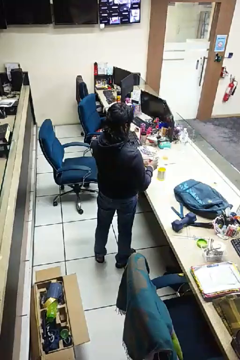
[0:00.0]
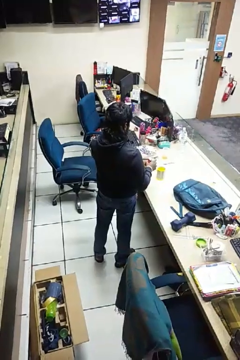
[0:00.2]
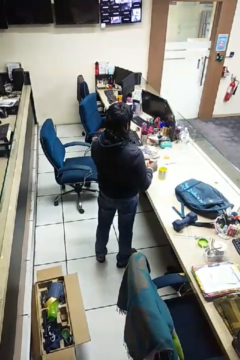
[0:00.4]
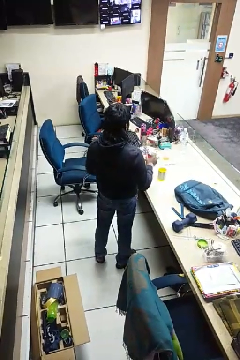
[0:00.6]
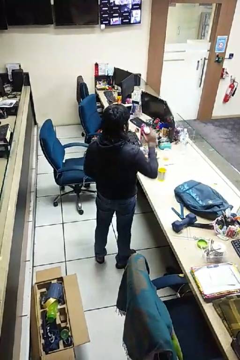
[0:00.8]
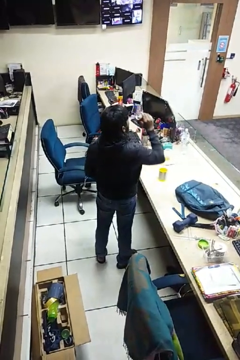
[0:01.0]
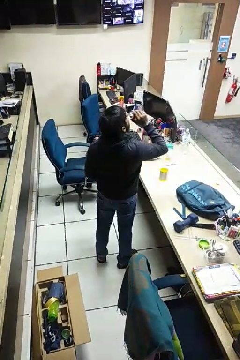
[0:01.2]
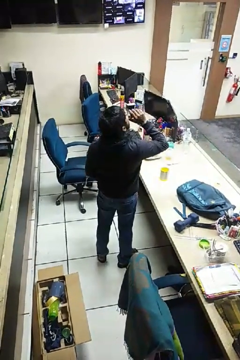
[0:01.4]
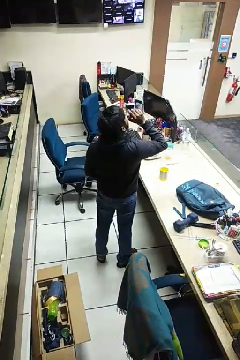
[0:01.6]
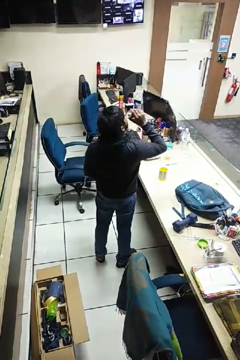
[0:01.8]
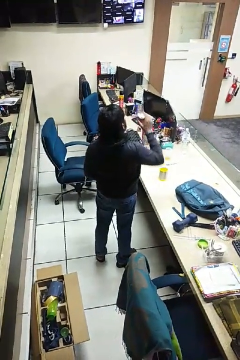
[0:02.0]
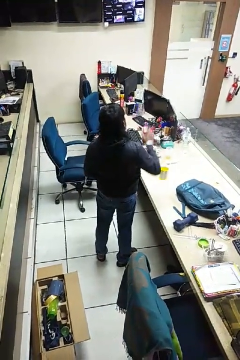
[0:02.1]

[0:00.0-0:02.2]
person drinks from beverage can

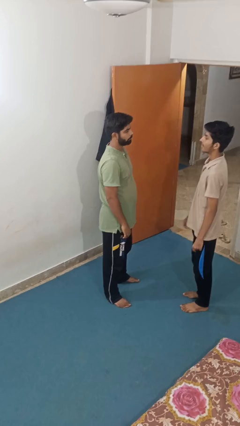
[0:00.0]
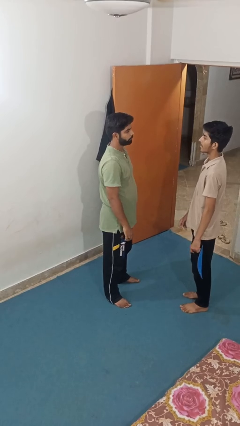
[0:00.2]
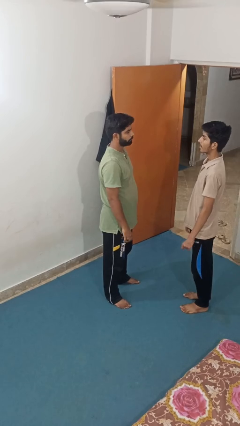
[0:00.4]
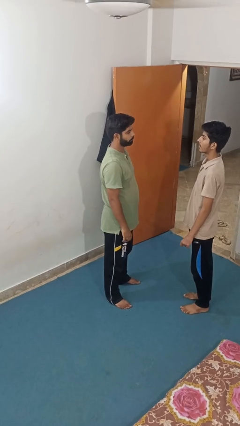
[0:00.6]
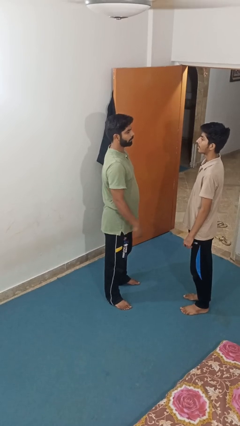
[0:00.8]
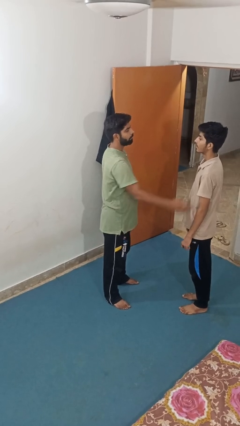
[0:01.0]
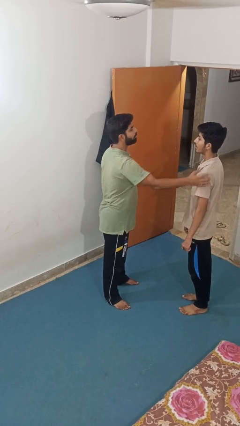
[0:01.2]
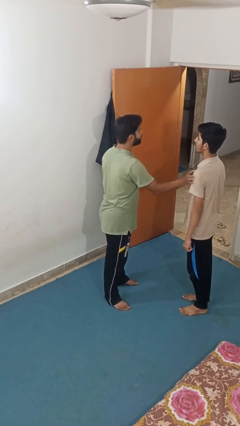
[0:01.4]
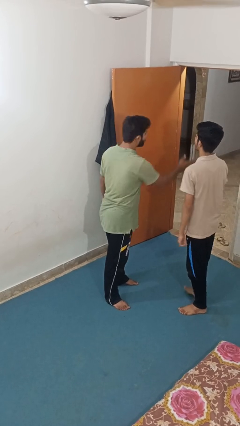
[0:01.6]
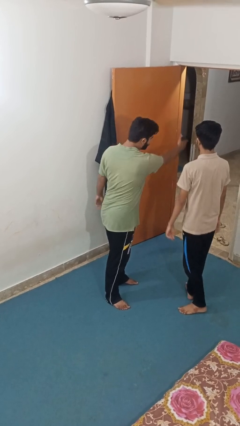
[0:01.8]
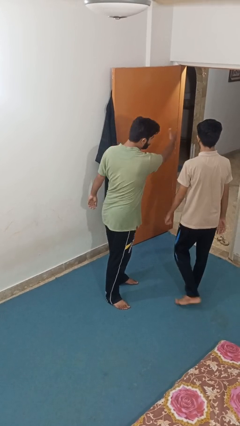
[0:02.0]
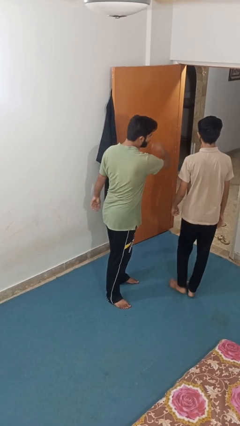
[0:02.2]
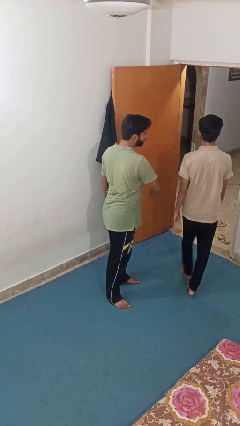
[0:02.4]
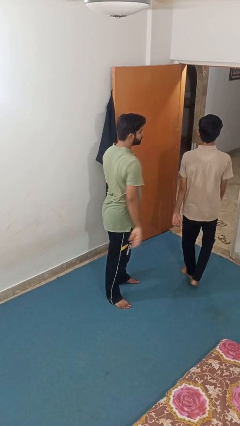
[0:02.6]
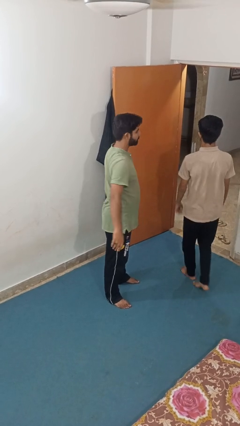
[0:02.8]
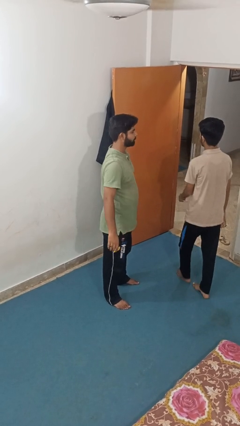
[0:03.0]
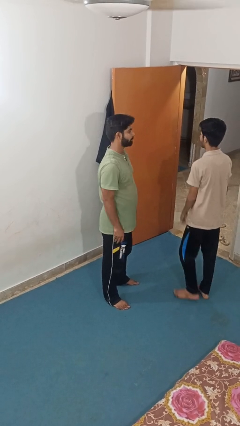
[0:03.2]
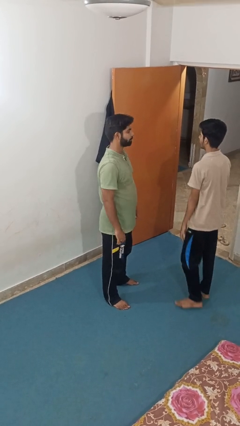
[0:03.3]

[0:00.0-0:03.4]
person shoves person

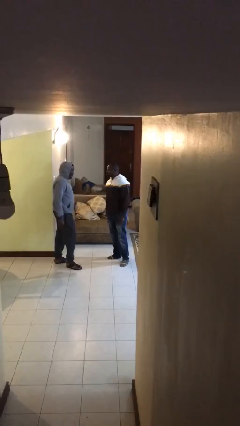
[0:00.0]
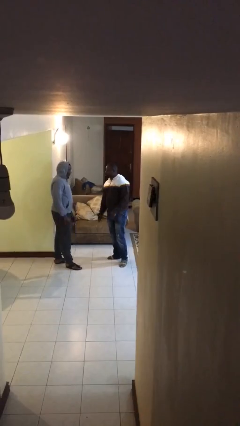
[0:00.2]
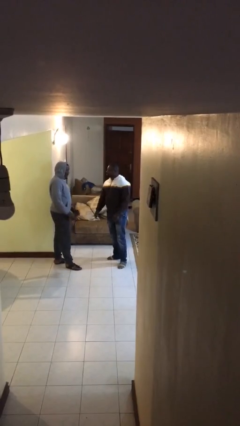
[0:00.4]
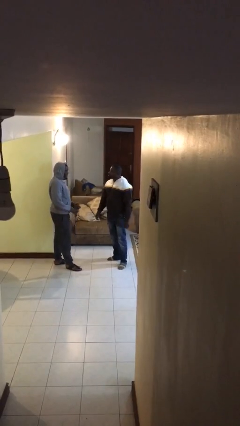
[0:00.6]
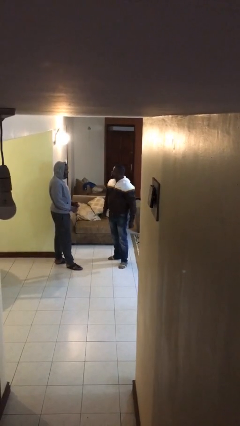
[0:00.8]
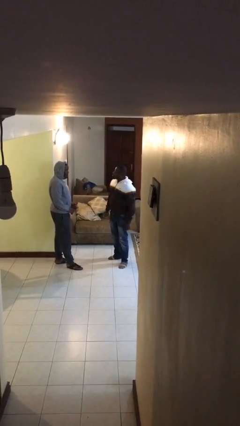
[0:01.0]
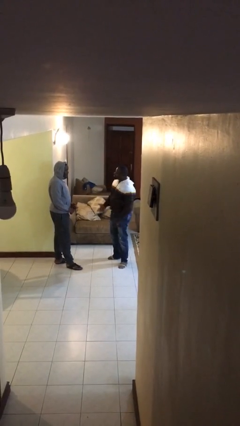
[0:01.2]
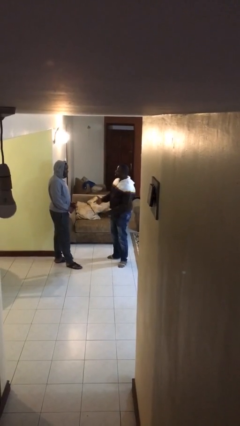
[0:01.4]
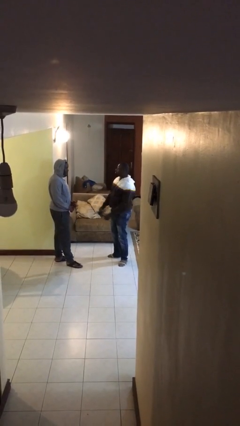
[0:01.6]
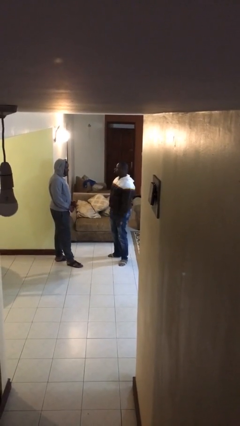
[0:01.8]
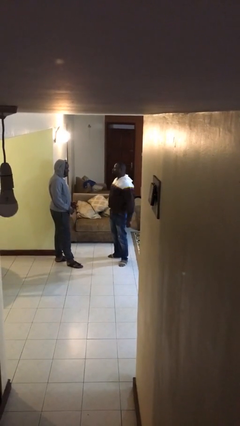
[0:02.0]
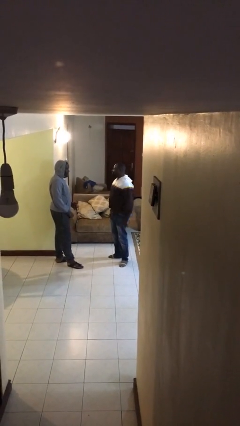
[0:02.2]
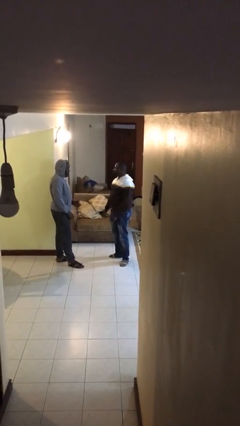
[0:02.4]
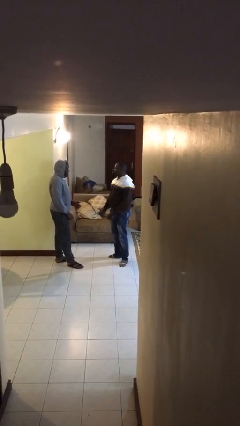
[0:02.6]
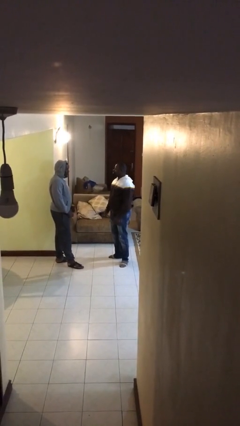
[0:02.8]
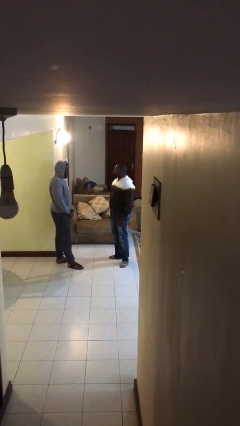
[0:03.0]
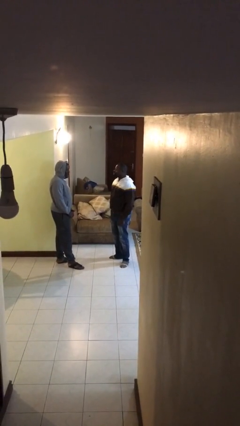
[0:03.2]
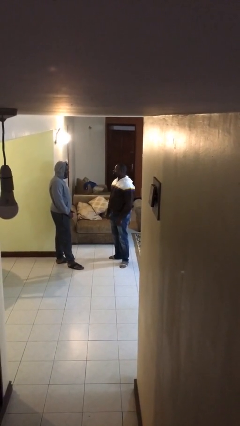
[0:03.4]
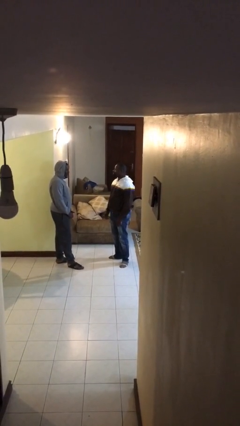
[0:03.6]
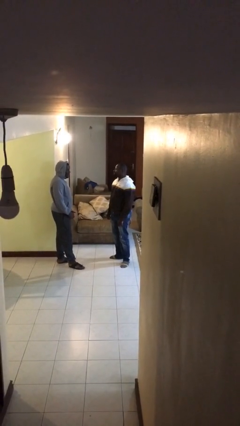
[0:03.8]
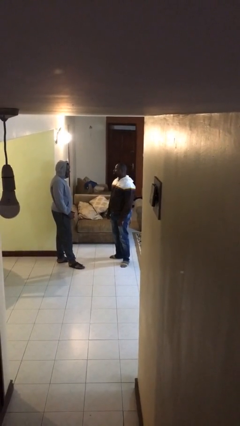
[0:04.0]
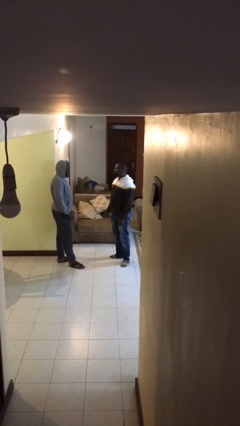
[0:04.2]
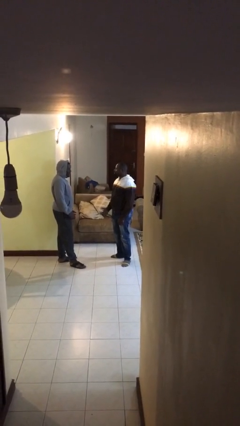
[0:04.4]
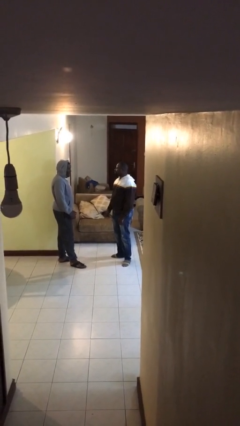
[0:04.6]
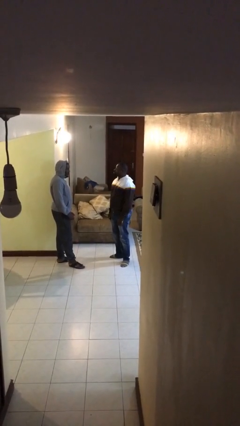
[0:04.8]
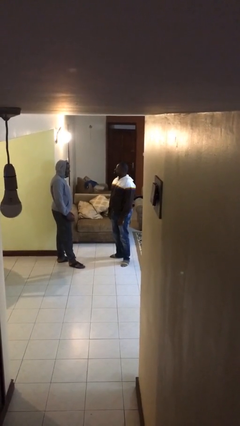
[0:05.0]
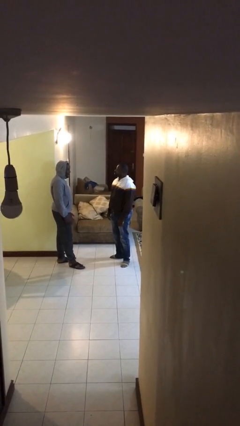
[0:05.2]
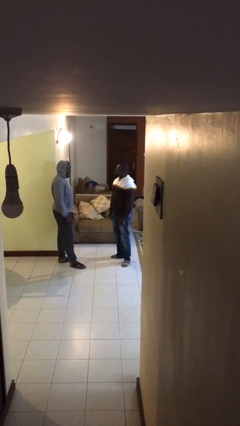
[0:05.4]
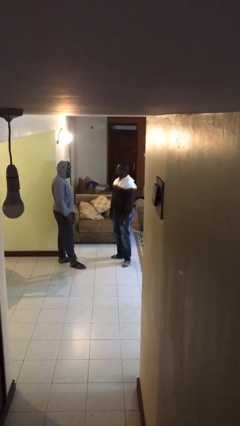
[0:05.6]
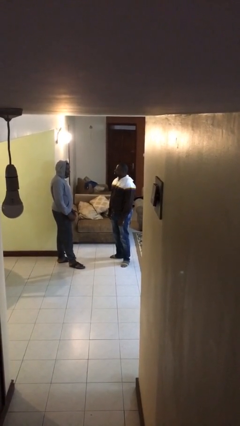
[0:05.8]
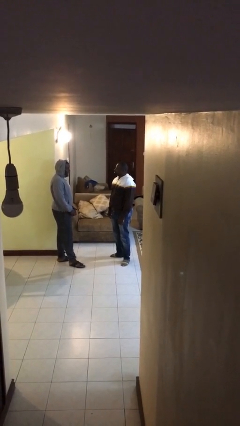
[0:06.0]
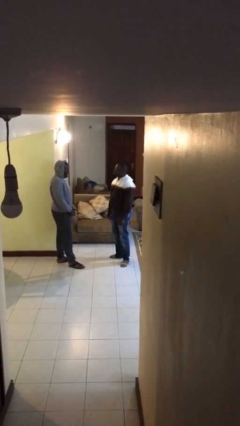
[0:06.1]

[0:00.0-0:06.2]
person talks to person

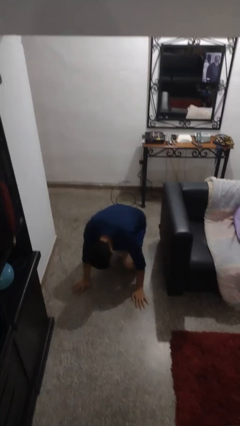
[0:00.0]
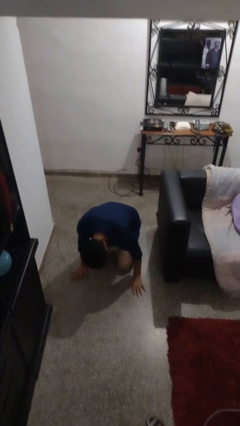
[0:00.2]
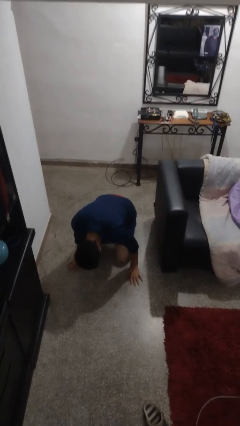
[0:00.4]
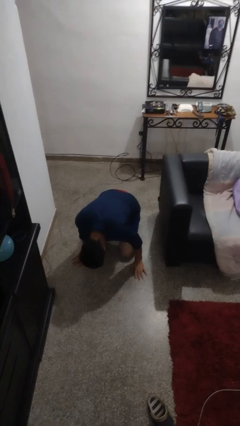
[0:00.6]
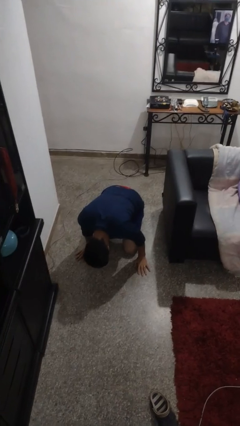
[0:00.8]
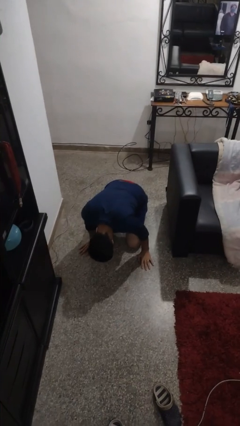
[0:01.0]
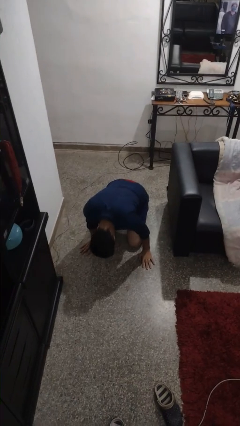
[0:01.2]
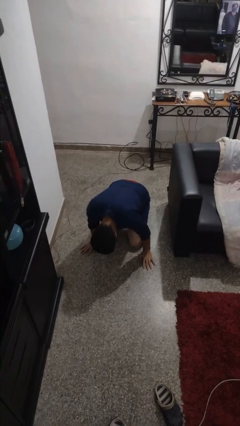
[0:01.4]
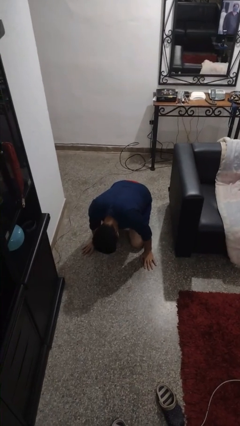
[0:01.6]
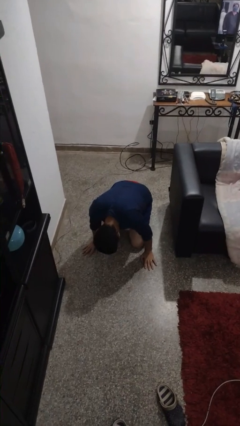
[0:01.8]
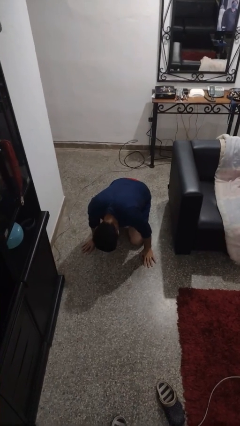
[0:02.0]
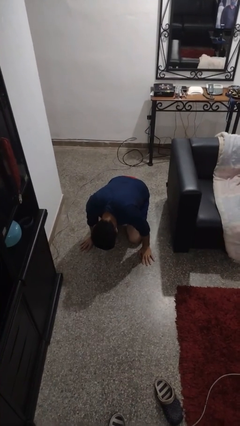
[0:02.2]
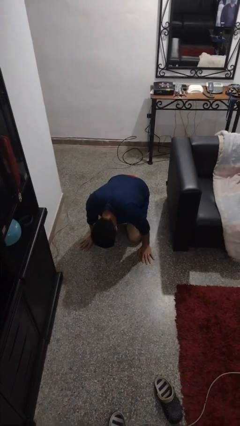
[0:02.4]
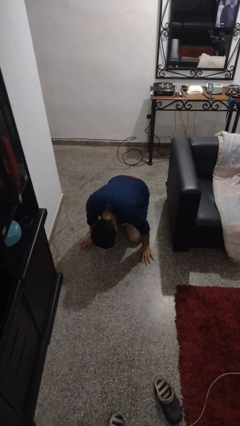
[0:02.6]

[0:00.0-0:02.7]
person lies down on floor

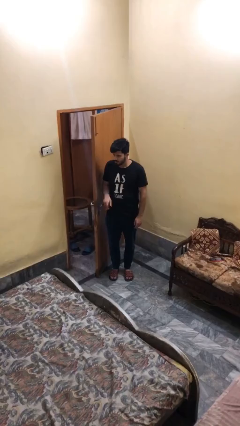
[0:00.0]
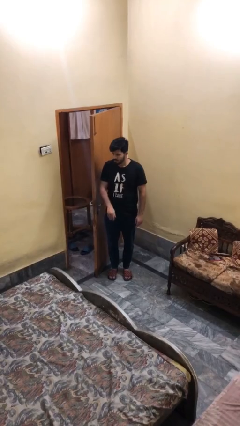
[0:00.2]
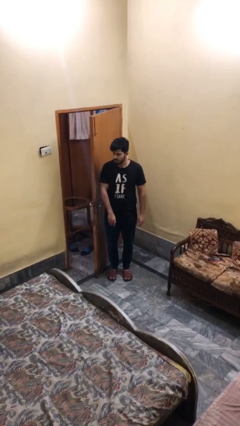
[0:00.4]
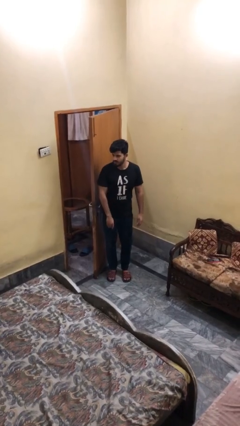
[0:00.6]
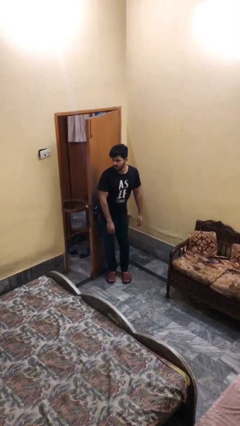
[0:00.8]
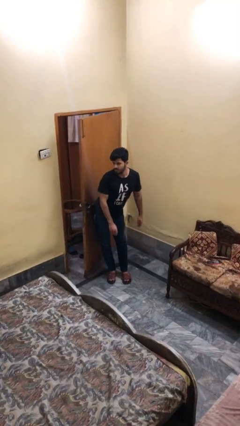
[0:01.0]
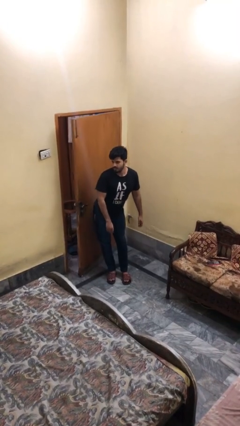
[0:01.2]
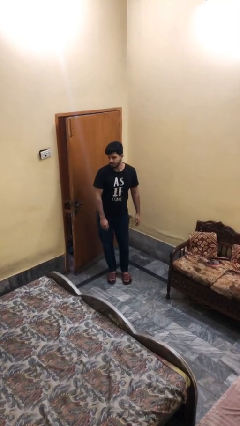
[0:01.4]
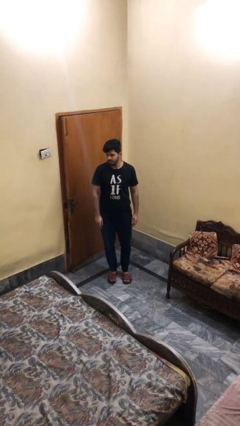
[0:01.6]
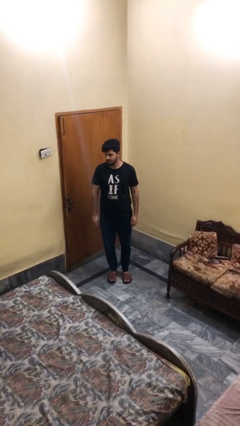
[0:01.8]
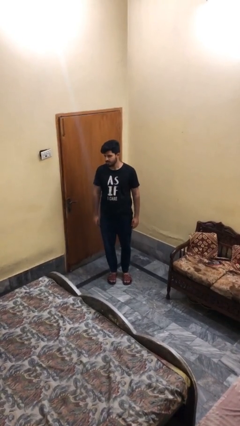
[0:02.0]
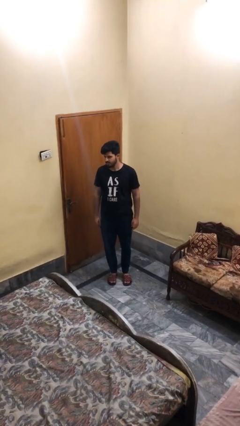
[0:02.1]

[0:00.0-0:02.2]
person closes door with hip

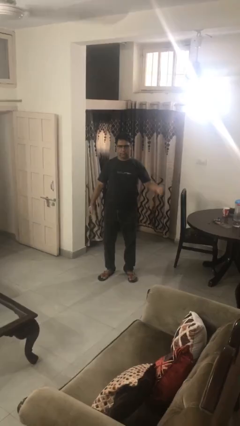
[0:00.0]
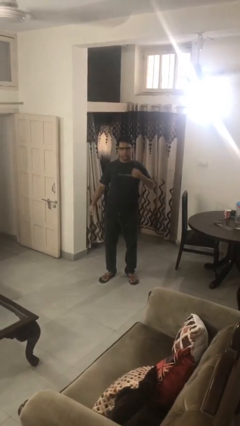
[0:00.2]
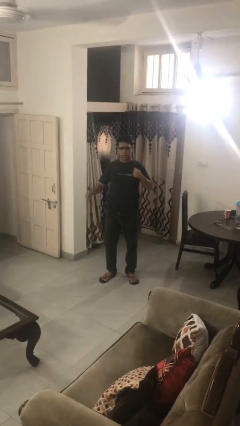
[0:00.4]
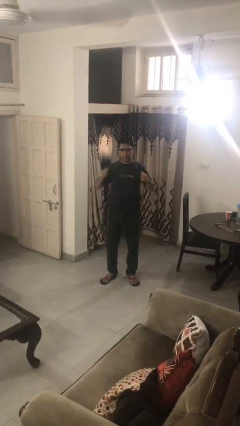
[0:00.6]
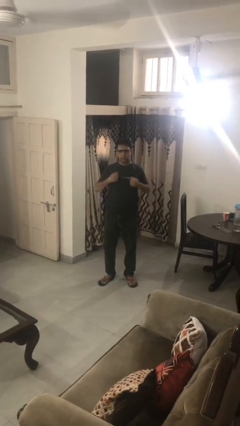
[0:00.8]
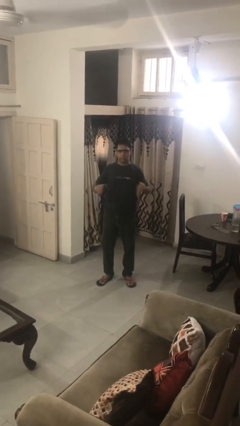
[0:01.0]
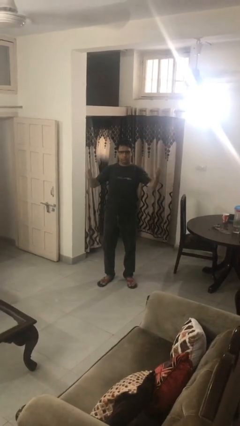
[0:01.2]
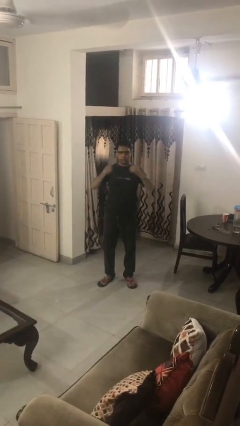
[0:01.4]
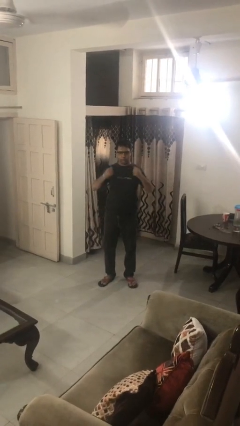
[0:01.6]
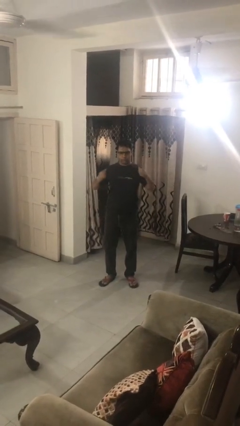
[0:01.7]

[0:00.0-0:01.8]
person drums on chest
